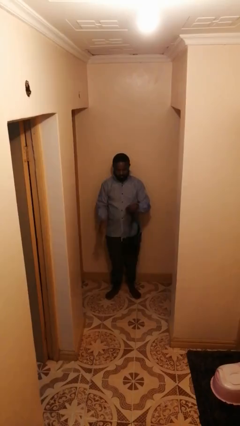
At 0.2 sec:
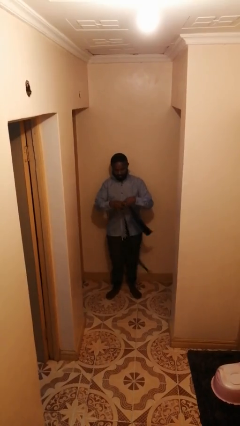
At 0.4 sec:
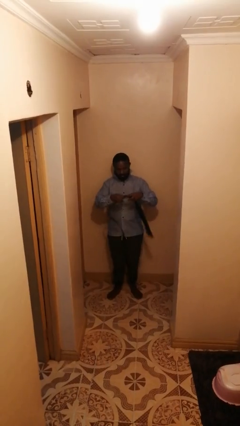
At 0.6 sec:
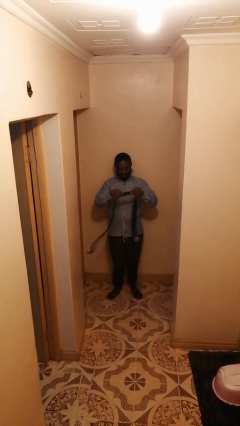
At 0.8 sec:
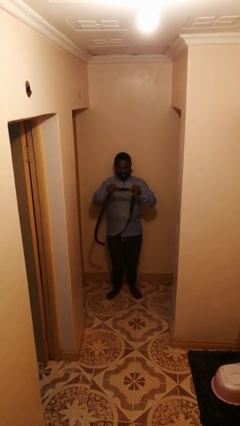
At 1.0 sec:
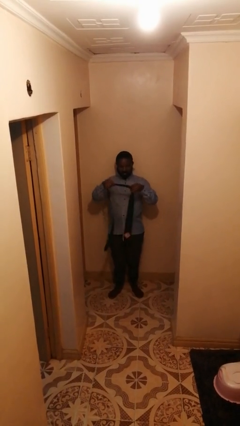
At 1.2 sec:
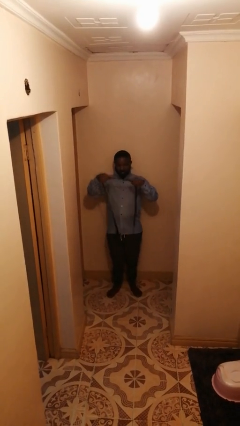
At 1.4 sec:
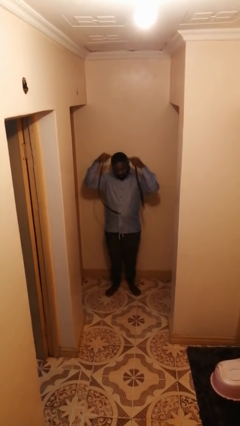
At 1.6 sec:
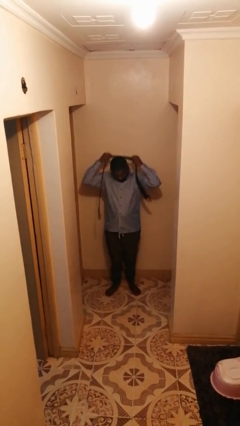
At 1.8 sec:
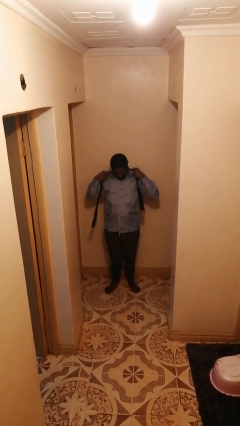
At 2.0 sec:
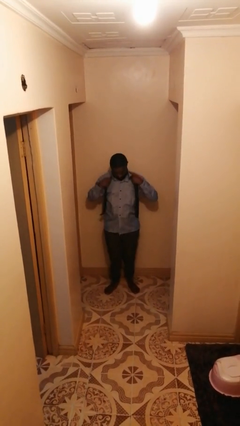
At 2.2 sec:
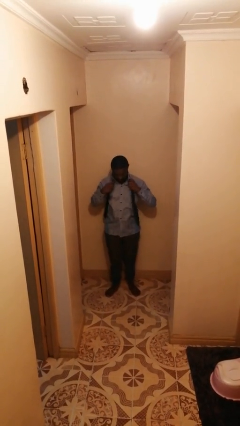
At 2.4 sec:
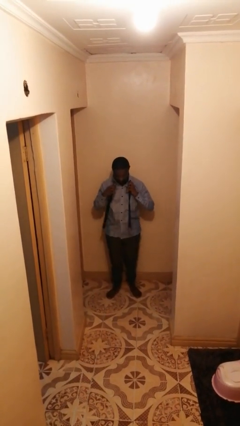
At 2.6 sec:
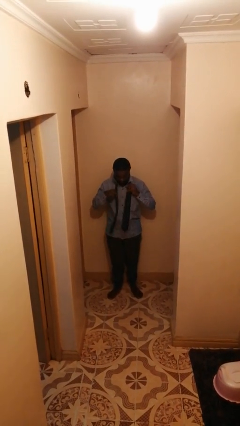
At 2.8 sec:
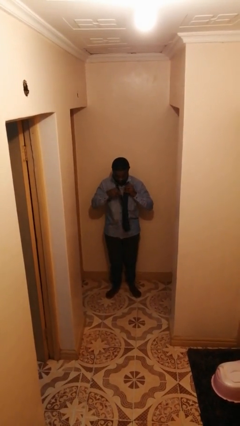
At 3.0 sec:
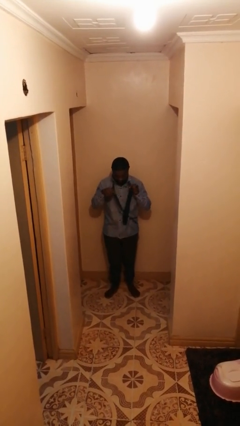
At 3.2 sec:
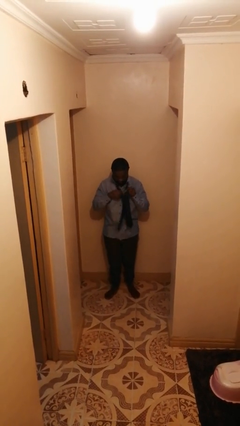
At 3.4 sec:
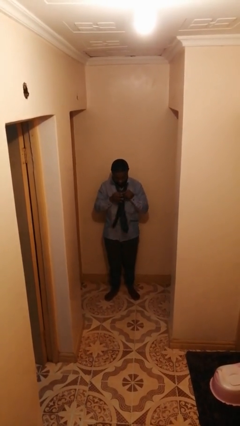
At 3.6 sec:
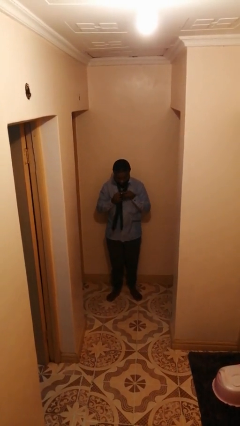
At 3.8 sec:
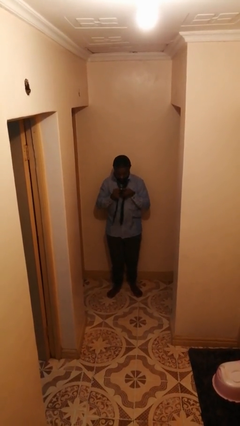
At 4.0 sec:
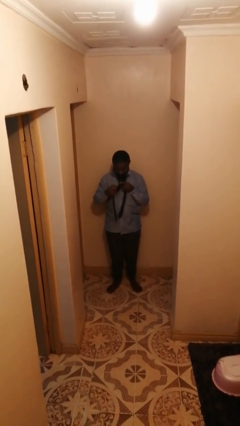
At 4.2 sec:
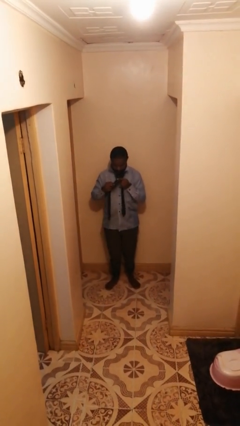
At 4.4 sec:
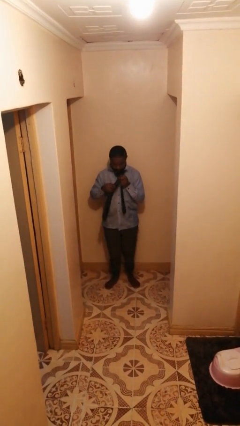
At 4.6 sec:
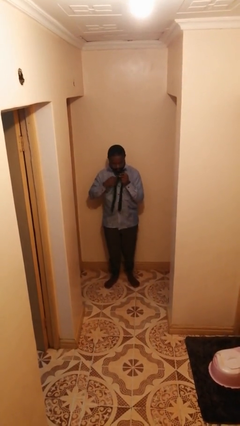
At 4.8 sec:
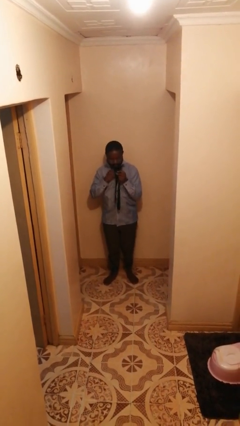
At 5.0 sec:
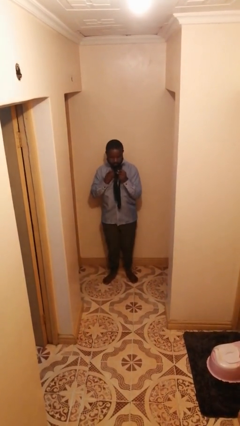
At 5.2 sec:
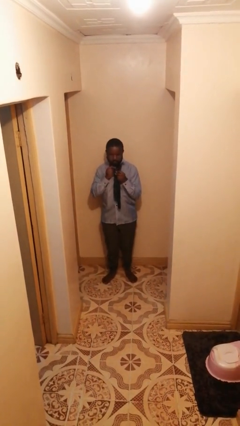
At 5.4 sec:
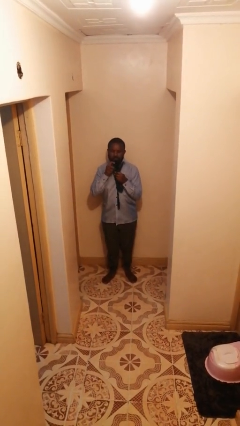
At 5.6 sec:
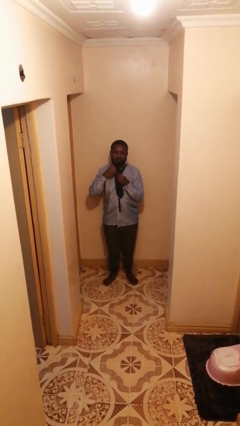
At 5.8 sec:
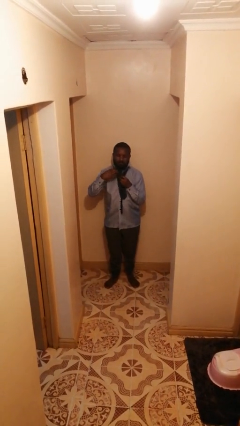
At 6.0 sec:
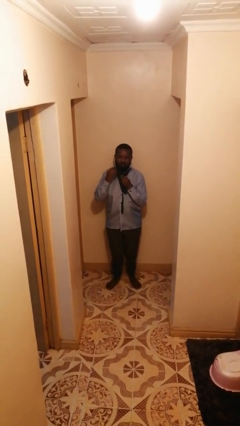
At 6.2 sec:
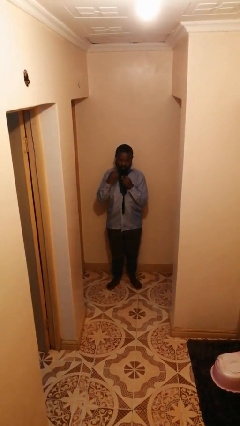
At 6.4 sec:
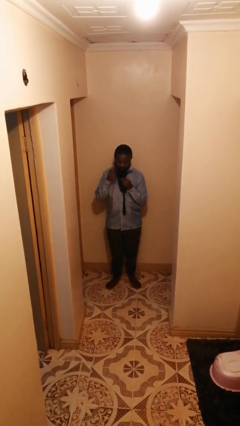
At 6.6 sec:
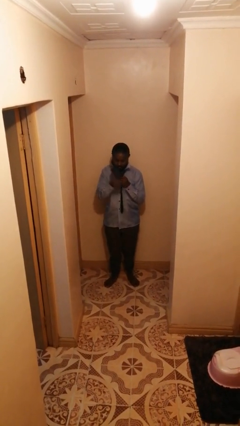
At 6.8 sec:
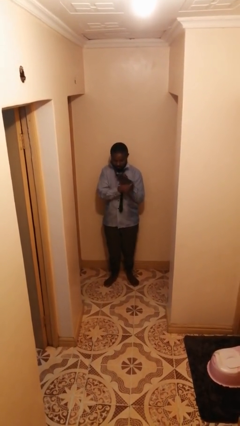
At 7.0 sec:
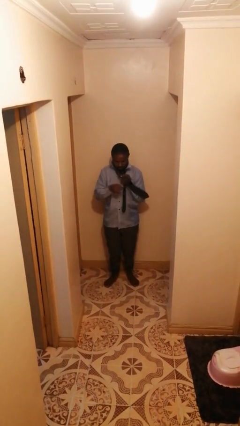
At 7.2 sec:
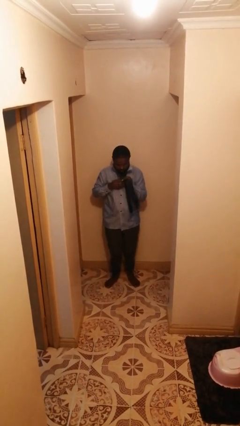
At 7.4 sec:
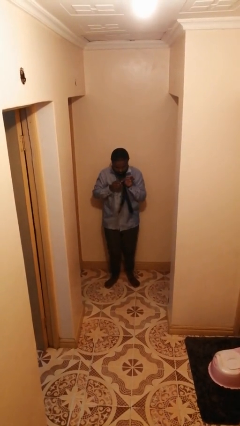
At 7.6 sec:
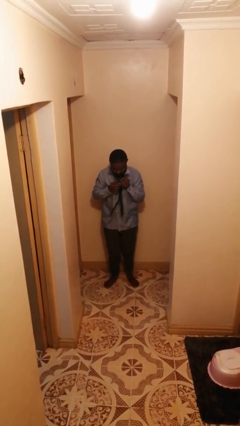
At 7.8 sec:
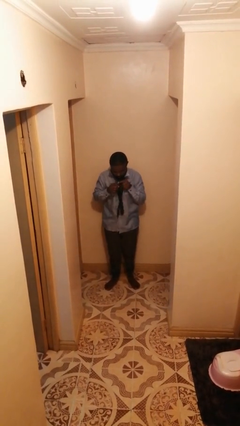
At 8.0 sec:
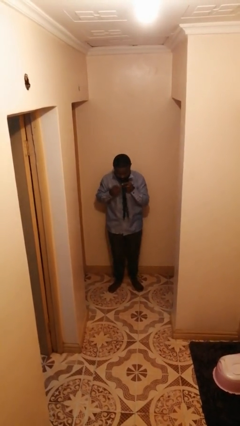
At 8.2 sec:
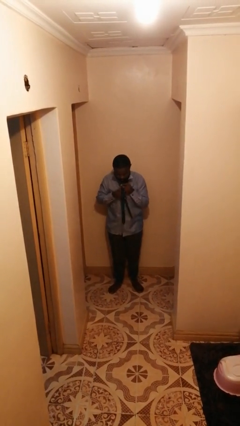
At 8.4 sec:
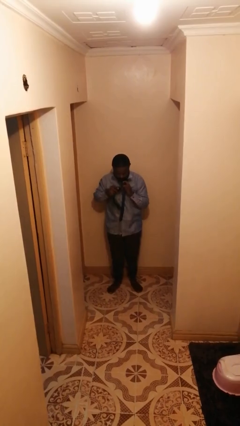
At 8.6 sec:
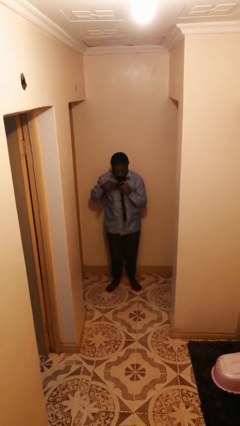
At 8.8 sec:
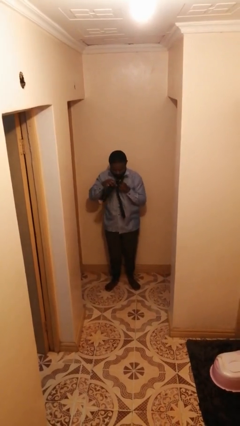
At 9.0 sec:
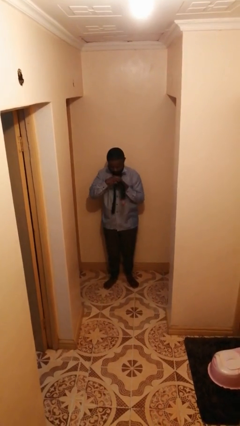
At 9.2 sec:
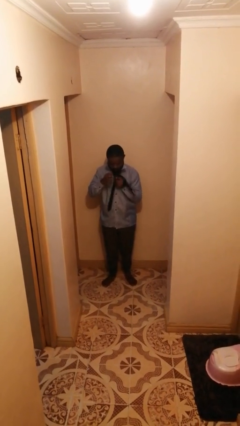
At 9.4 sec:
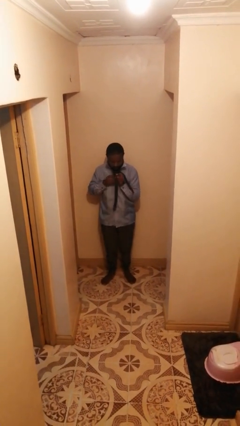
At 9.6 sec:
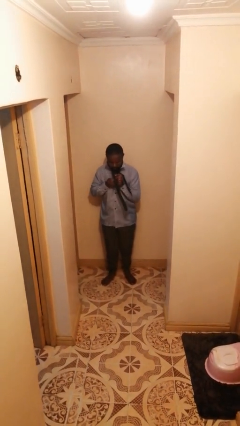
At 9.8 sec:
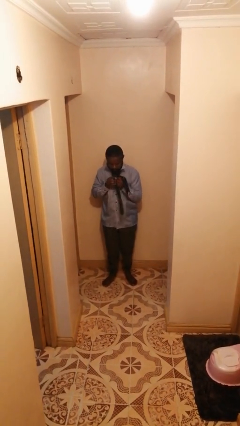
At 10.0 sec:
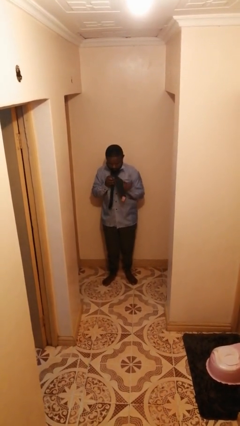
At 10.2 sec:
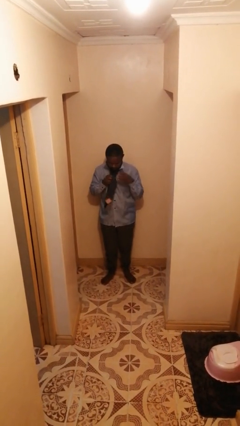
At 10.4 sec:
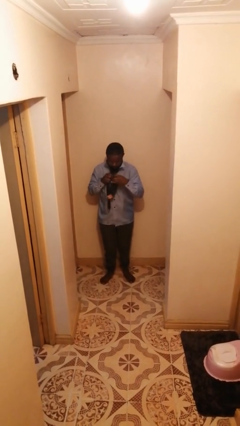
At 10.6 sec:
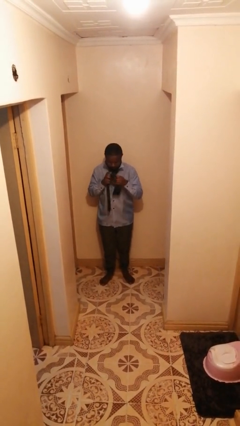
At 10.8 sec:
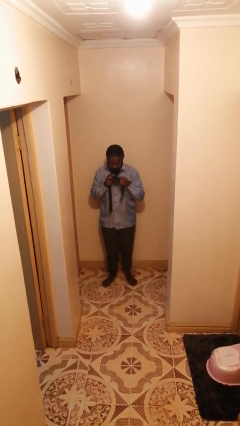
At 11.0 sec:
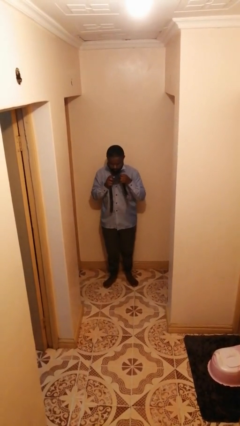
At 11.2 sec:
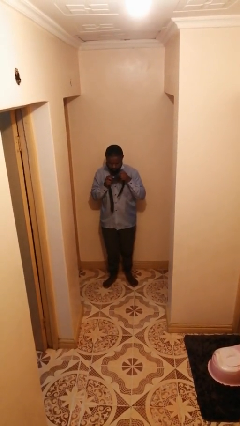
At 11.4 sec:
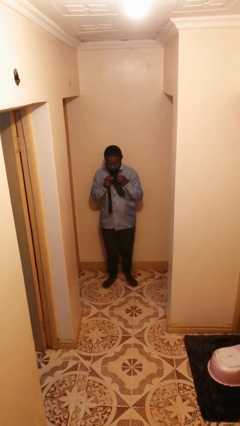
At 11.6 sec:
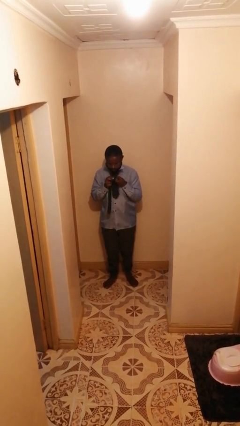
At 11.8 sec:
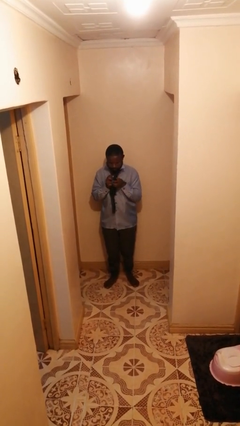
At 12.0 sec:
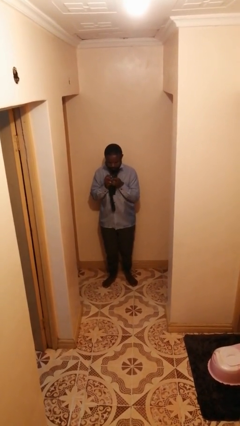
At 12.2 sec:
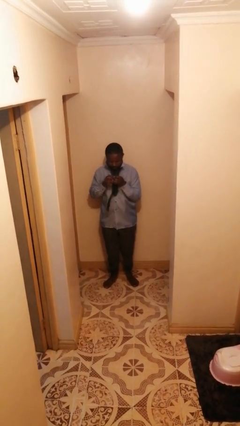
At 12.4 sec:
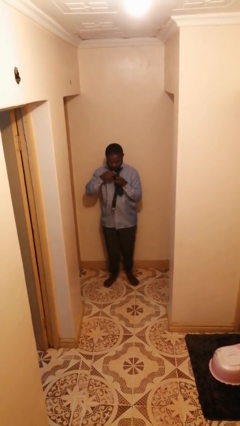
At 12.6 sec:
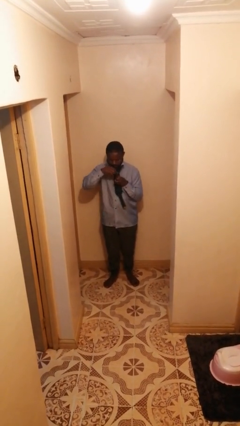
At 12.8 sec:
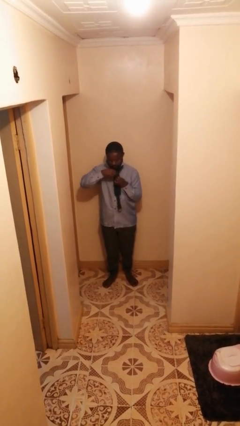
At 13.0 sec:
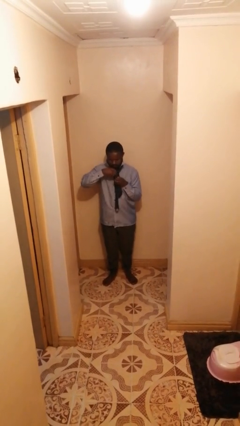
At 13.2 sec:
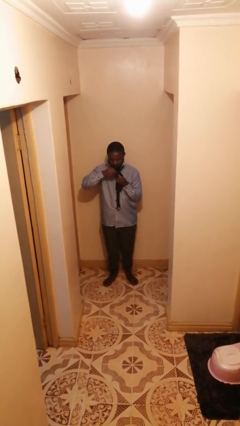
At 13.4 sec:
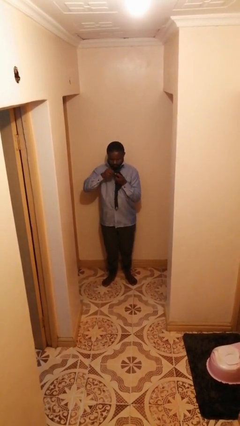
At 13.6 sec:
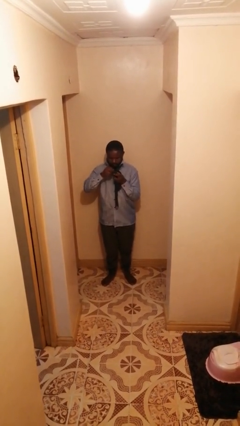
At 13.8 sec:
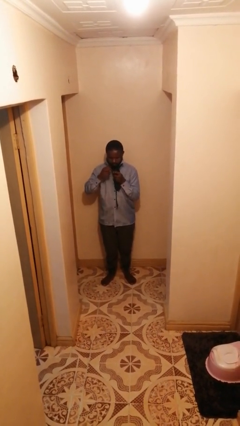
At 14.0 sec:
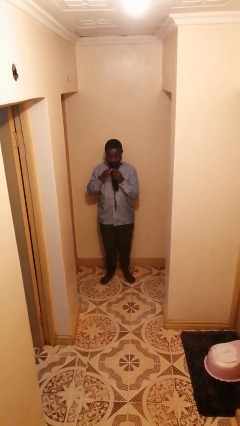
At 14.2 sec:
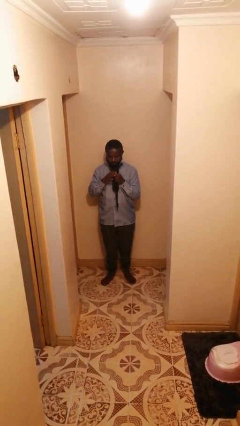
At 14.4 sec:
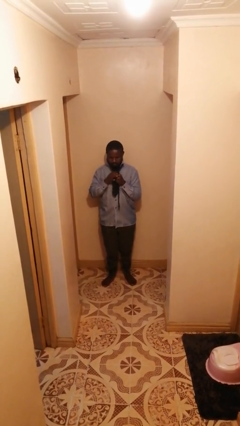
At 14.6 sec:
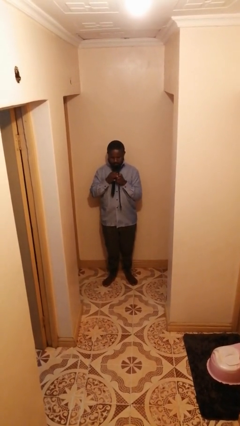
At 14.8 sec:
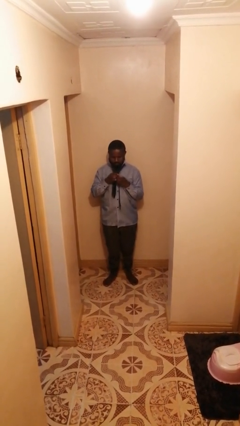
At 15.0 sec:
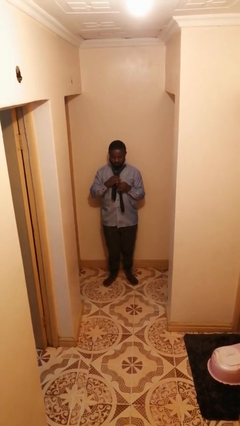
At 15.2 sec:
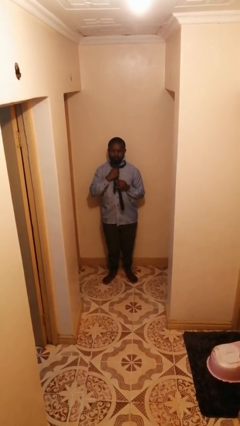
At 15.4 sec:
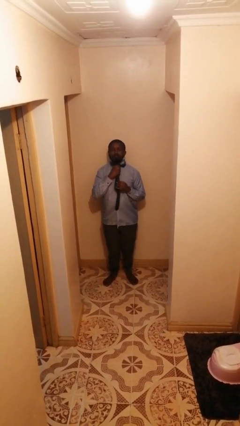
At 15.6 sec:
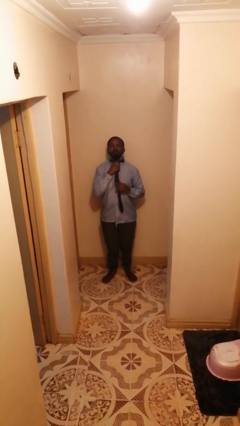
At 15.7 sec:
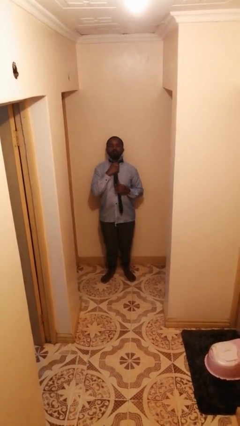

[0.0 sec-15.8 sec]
person puts on necktie

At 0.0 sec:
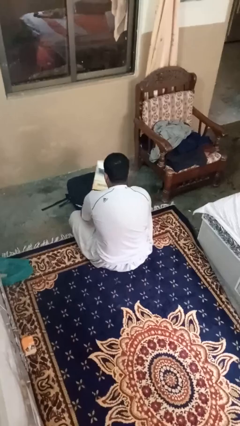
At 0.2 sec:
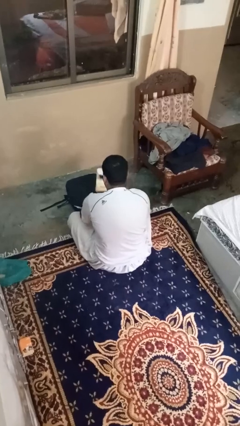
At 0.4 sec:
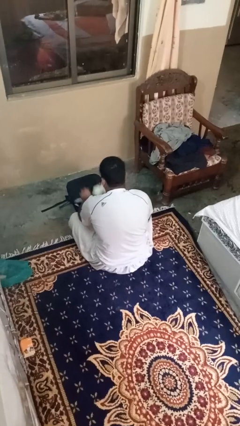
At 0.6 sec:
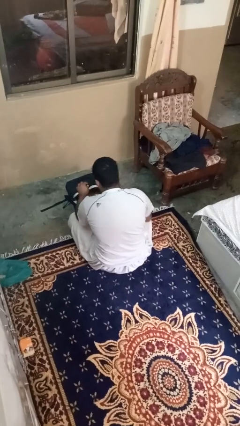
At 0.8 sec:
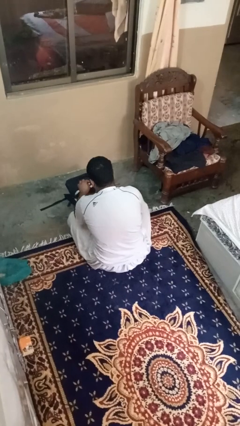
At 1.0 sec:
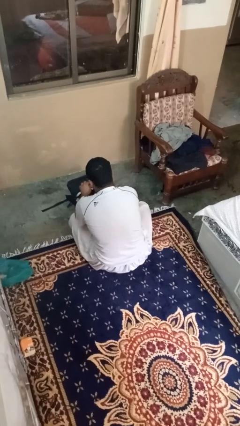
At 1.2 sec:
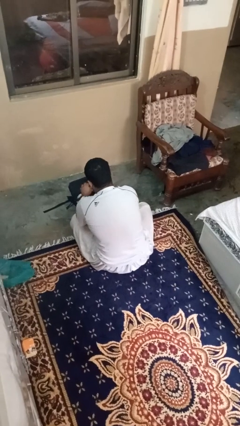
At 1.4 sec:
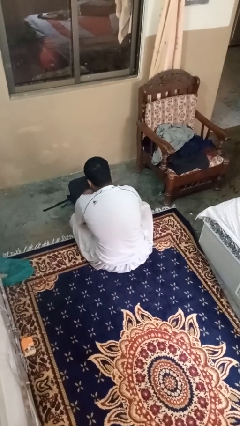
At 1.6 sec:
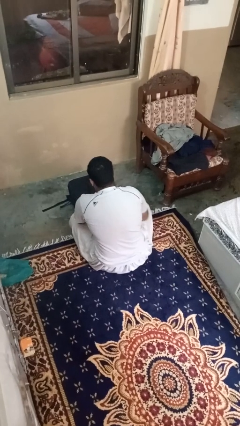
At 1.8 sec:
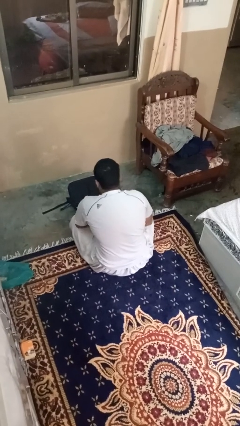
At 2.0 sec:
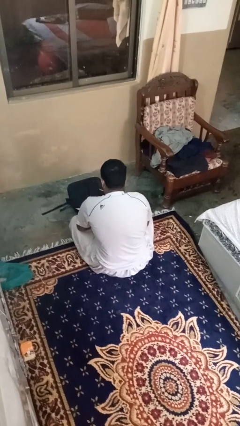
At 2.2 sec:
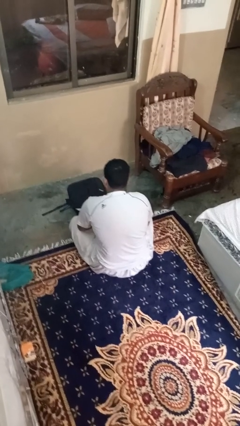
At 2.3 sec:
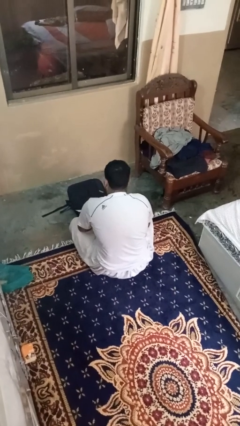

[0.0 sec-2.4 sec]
person puts object into bag
